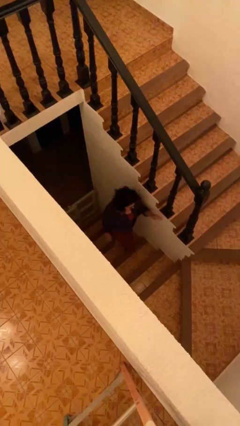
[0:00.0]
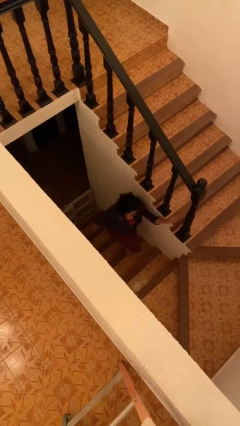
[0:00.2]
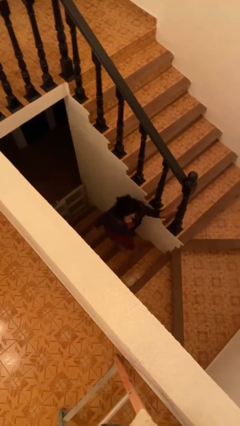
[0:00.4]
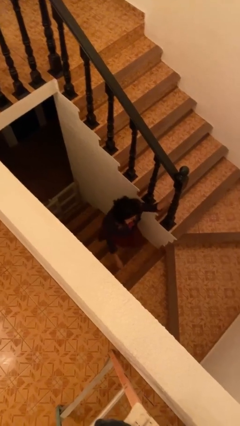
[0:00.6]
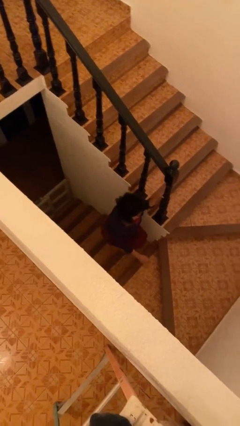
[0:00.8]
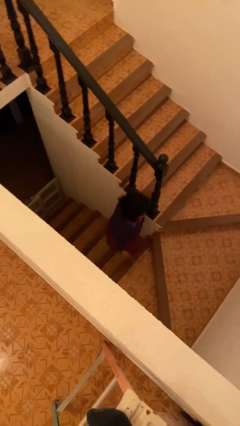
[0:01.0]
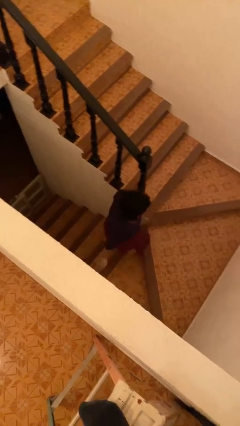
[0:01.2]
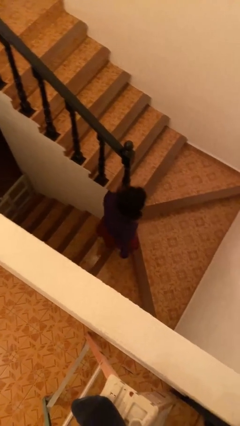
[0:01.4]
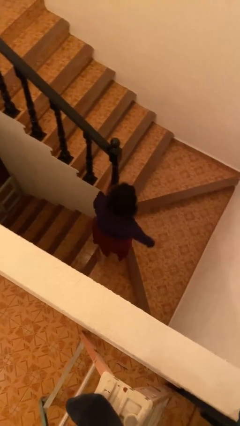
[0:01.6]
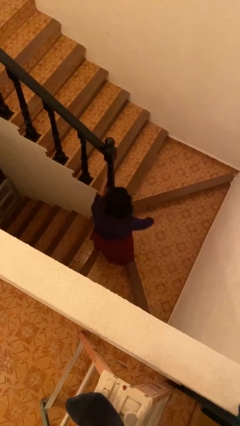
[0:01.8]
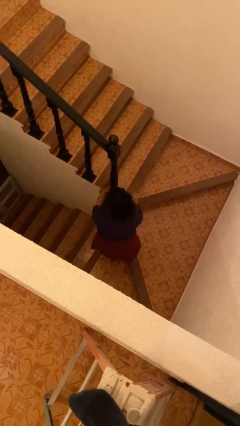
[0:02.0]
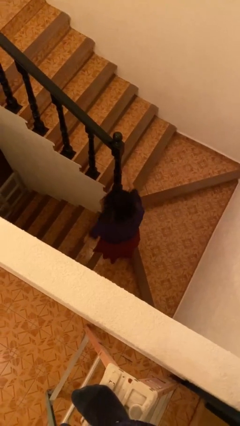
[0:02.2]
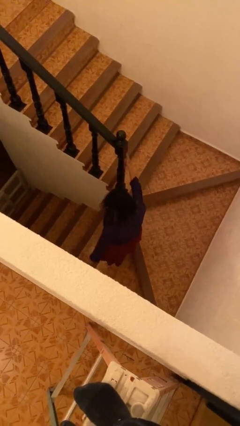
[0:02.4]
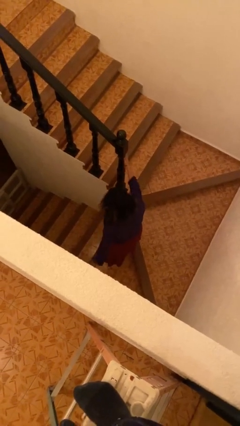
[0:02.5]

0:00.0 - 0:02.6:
person climbs up stairs

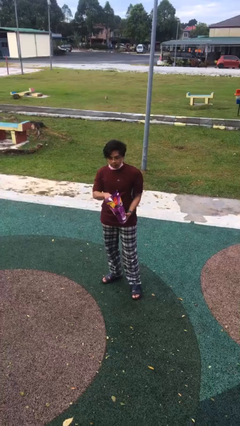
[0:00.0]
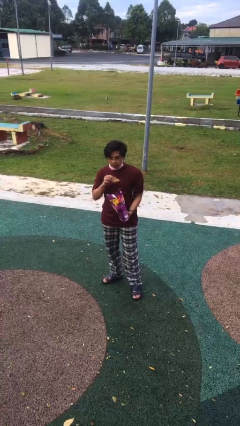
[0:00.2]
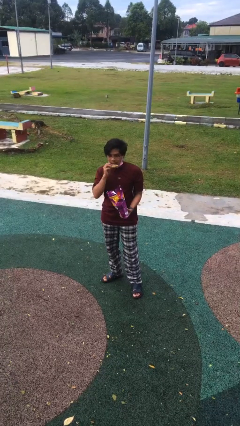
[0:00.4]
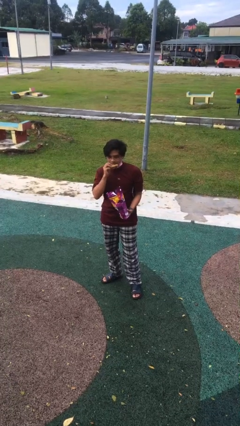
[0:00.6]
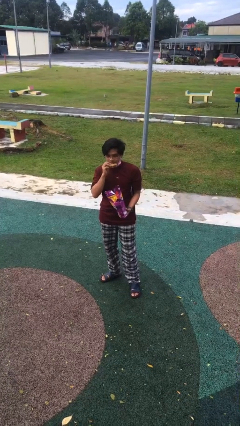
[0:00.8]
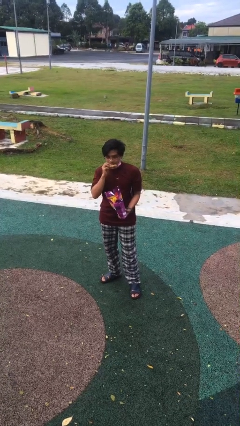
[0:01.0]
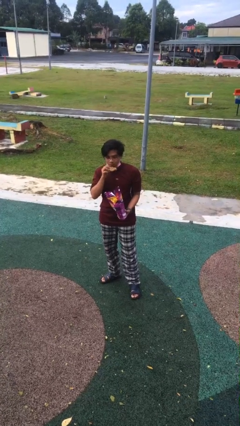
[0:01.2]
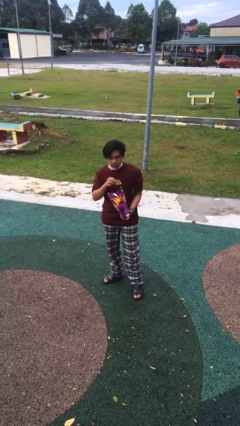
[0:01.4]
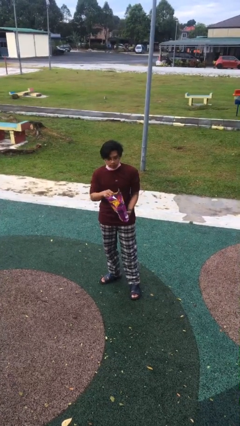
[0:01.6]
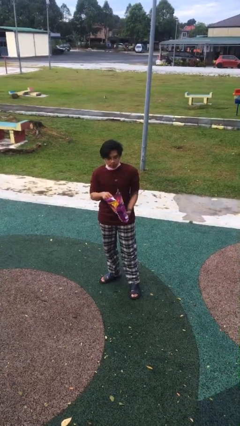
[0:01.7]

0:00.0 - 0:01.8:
person eats snack from bag

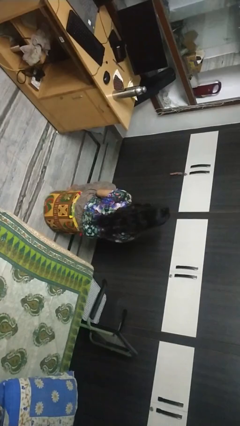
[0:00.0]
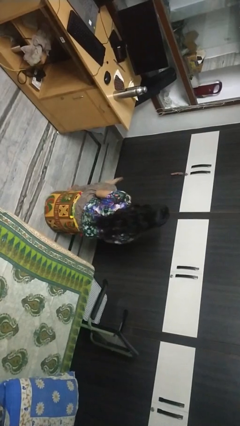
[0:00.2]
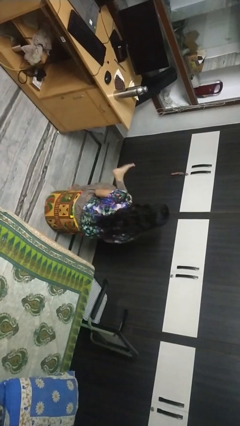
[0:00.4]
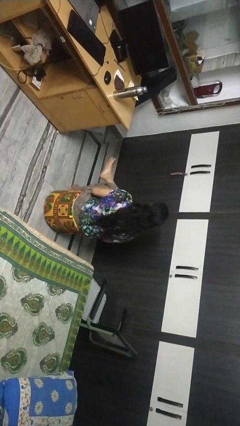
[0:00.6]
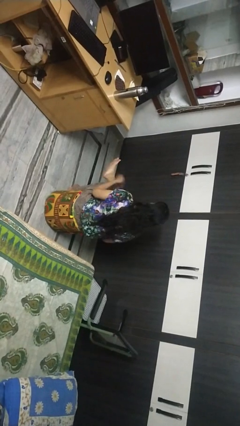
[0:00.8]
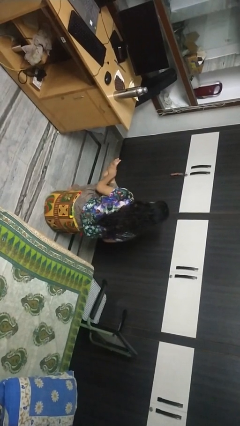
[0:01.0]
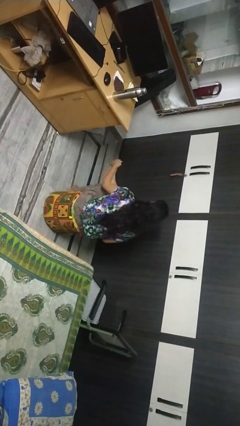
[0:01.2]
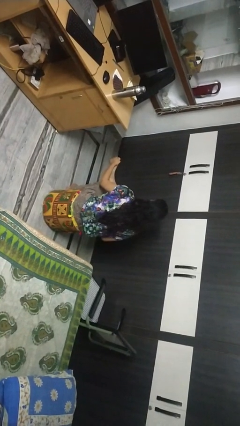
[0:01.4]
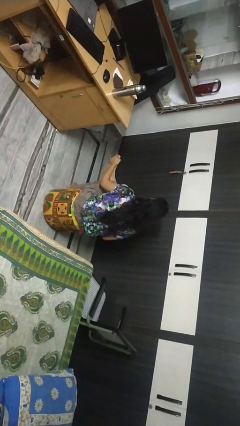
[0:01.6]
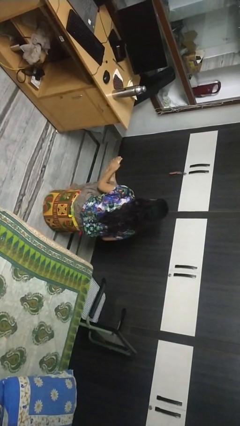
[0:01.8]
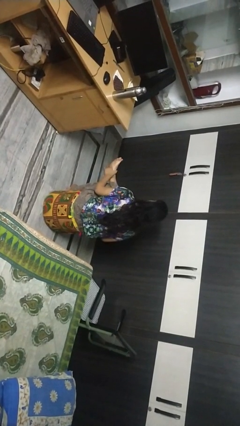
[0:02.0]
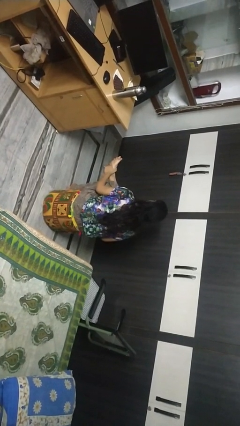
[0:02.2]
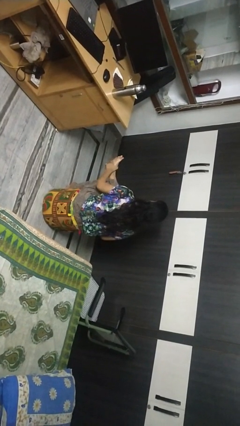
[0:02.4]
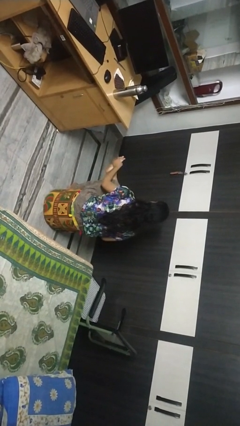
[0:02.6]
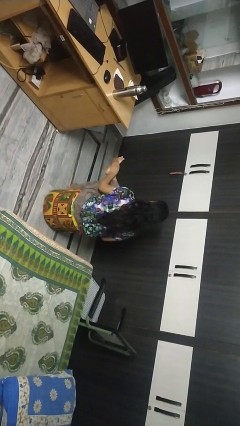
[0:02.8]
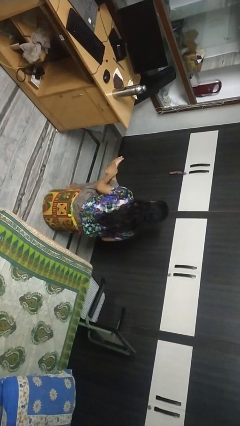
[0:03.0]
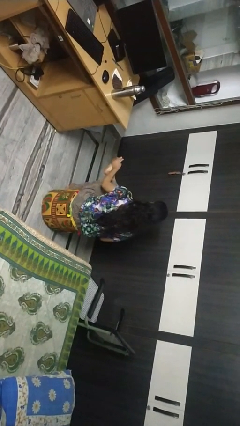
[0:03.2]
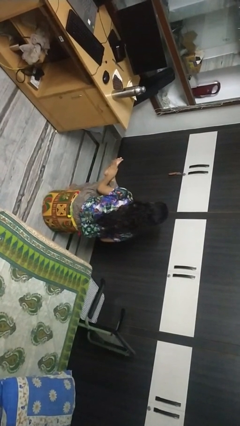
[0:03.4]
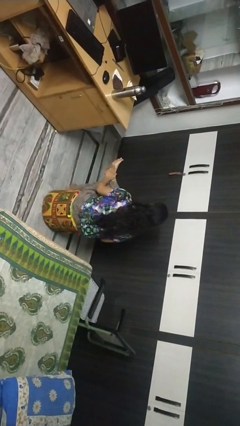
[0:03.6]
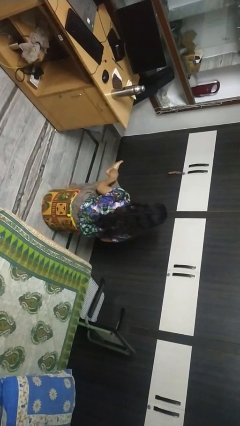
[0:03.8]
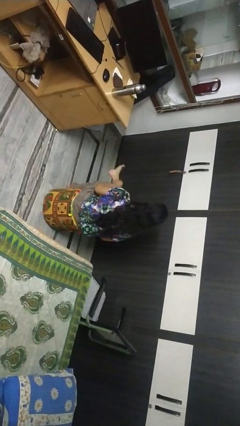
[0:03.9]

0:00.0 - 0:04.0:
person rubs foot

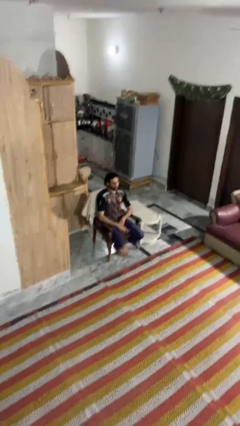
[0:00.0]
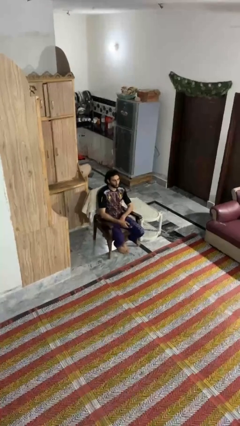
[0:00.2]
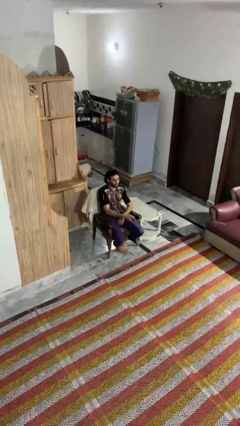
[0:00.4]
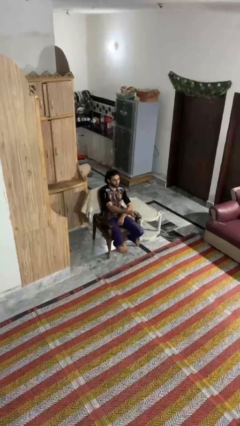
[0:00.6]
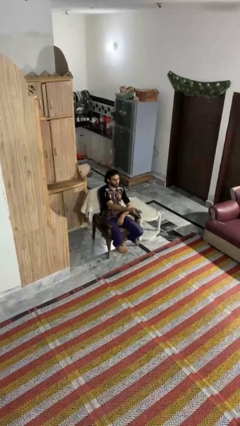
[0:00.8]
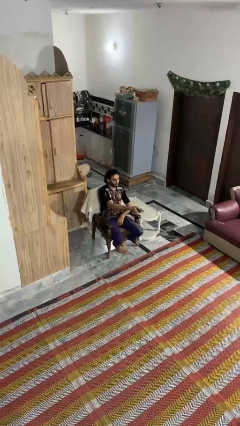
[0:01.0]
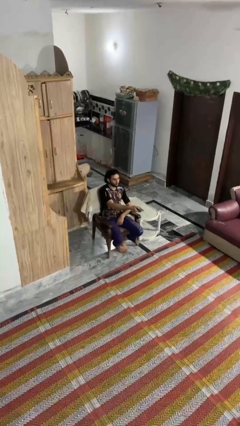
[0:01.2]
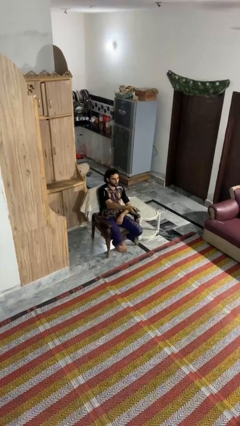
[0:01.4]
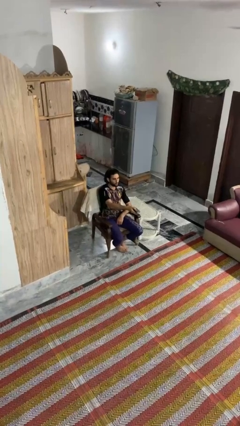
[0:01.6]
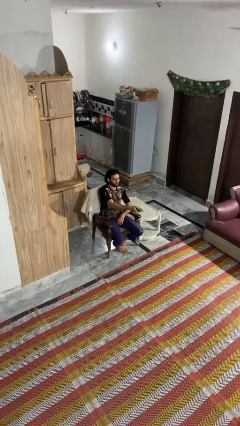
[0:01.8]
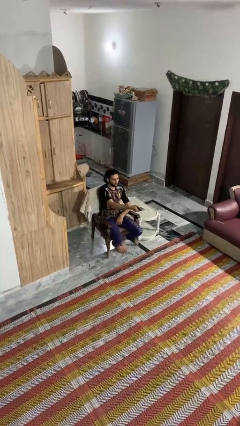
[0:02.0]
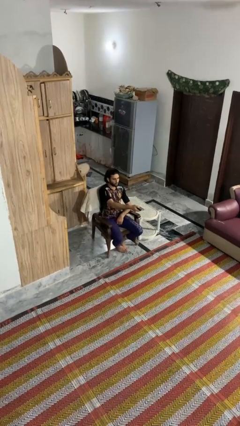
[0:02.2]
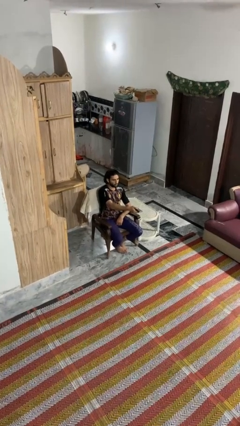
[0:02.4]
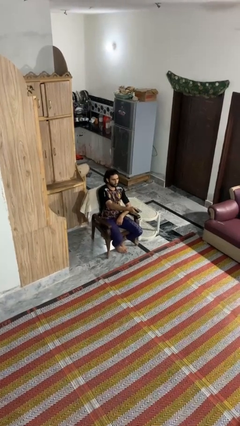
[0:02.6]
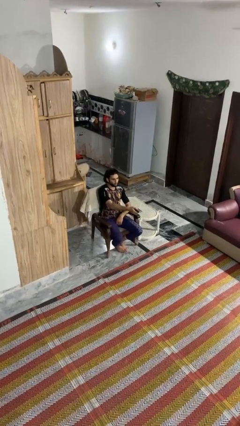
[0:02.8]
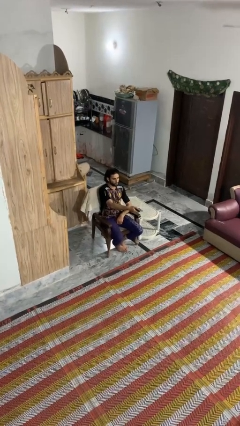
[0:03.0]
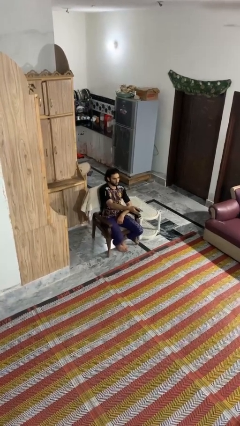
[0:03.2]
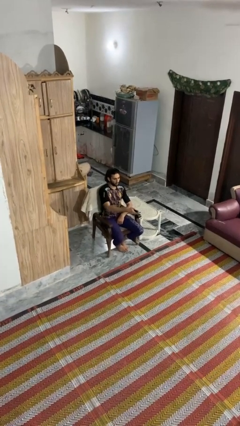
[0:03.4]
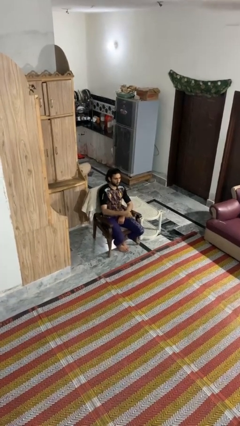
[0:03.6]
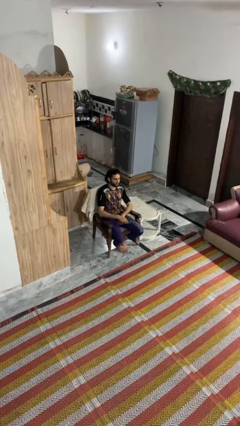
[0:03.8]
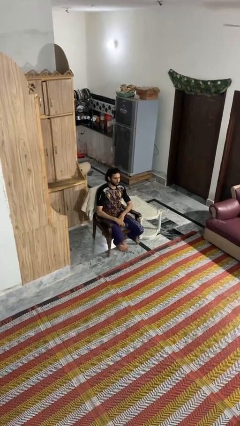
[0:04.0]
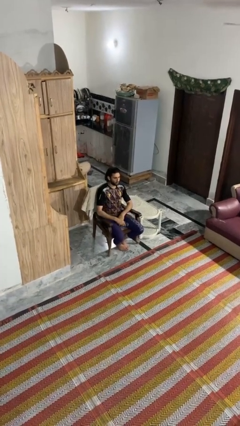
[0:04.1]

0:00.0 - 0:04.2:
person uses television remote

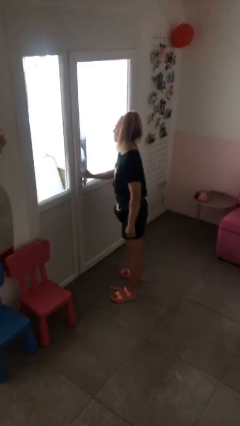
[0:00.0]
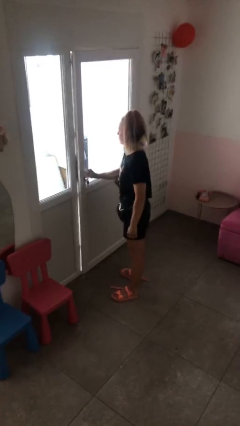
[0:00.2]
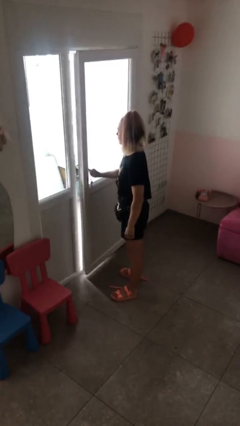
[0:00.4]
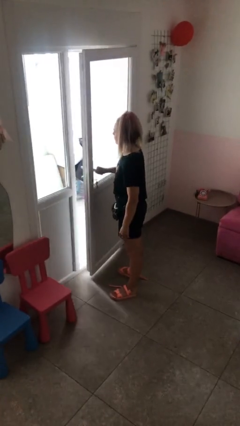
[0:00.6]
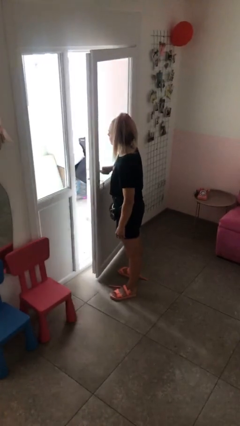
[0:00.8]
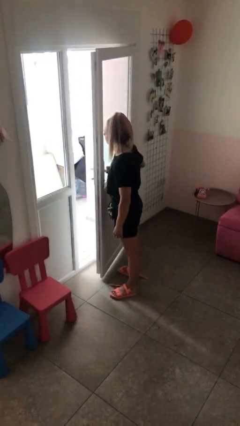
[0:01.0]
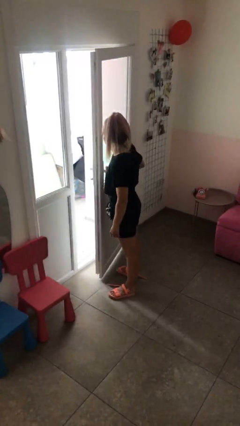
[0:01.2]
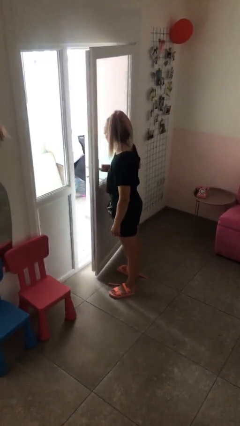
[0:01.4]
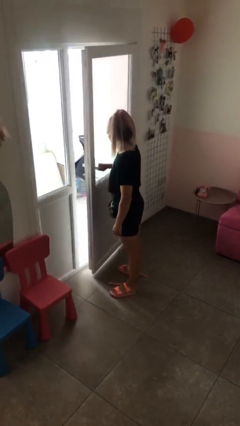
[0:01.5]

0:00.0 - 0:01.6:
person opens facility door

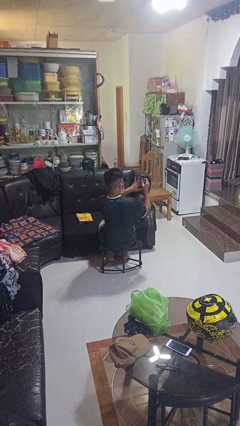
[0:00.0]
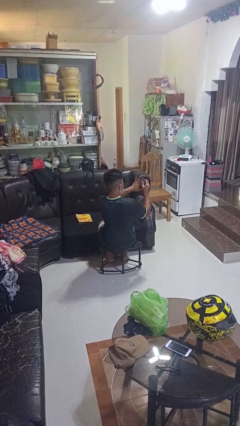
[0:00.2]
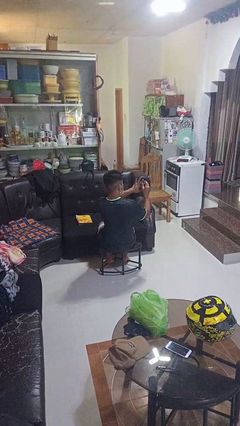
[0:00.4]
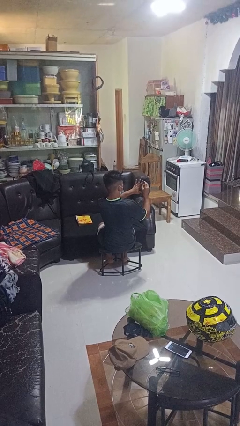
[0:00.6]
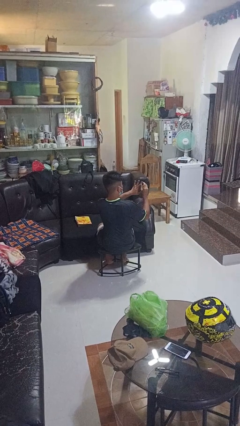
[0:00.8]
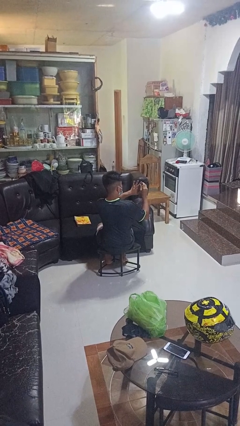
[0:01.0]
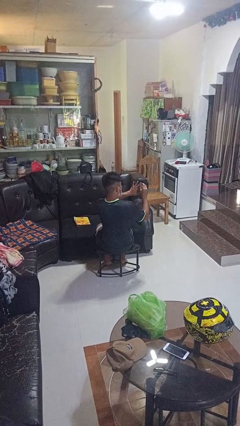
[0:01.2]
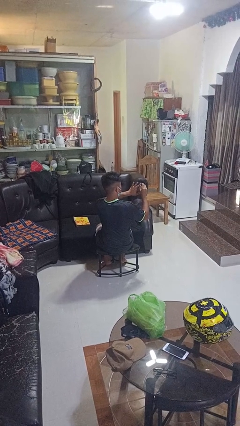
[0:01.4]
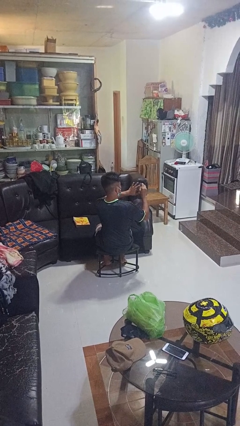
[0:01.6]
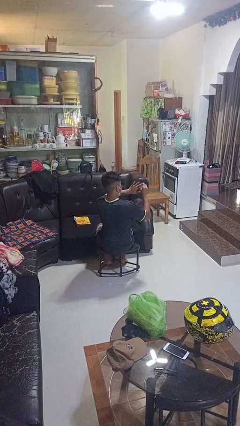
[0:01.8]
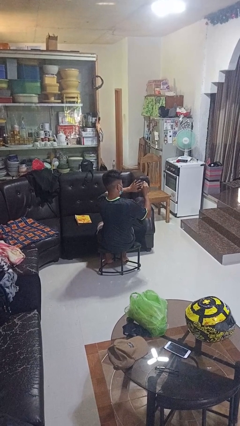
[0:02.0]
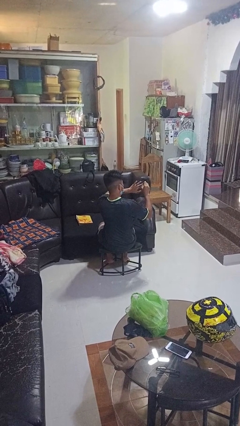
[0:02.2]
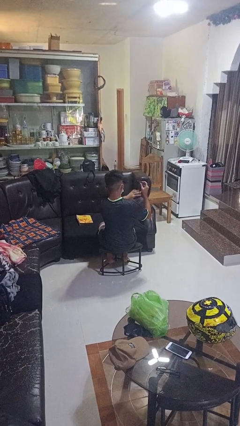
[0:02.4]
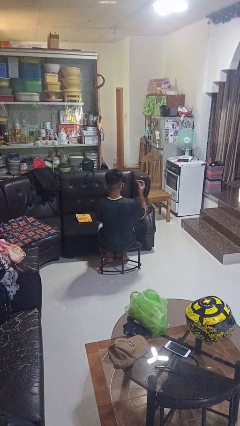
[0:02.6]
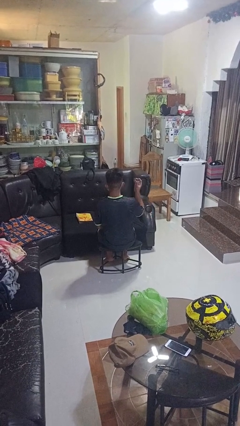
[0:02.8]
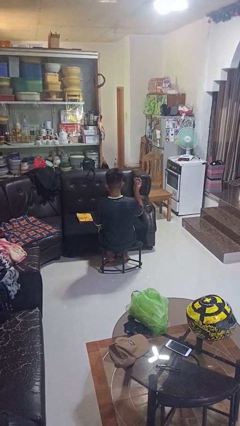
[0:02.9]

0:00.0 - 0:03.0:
person clips fingernails
